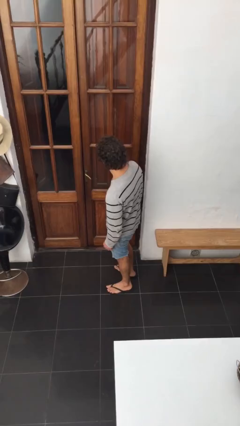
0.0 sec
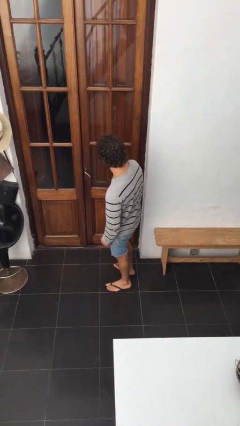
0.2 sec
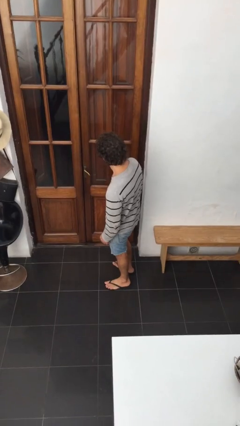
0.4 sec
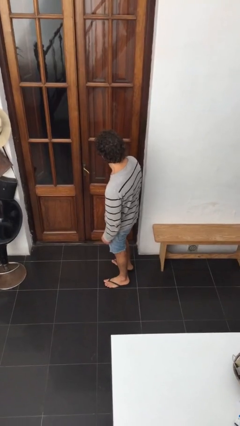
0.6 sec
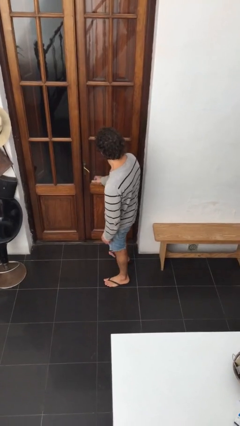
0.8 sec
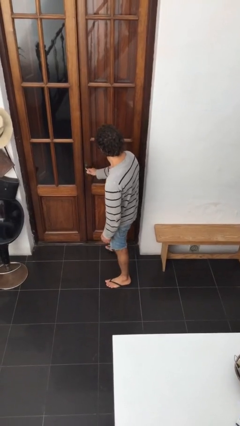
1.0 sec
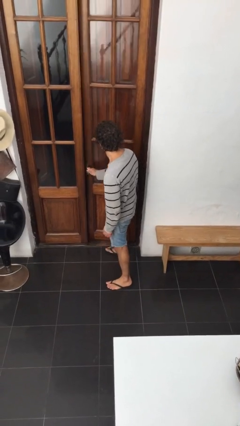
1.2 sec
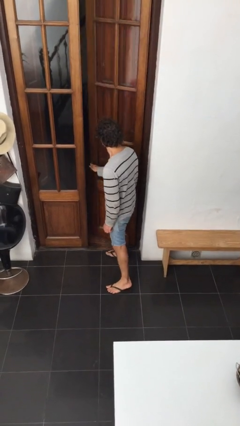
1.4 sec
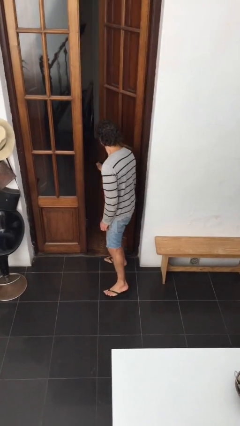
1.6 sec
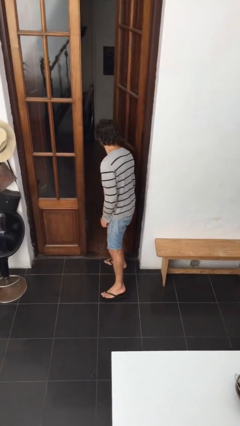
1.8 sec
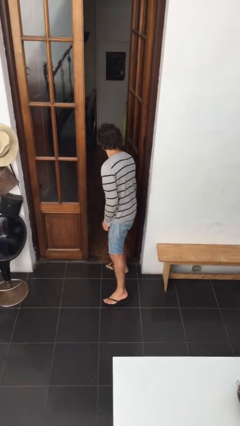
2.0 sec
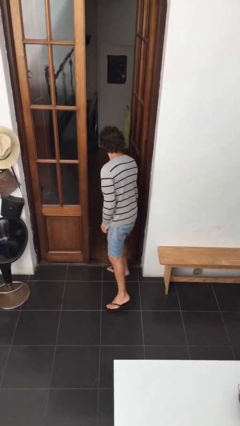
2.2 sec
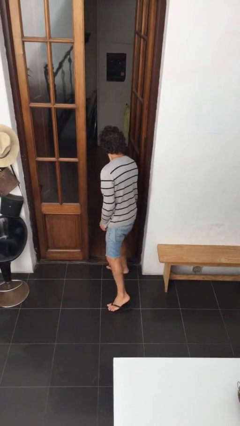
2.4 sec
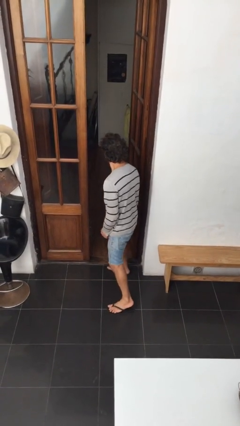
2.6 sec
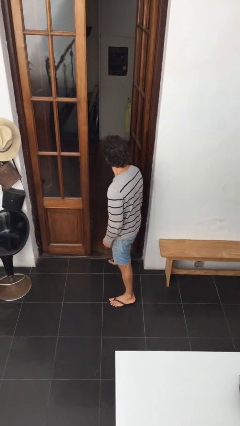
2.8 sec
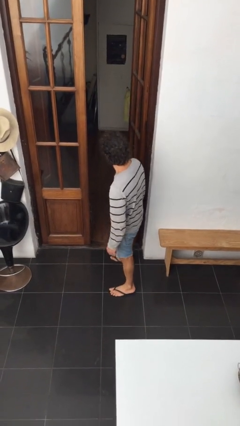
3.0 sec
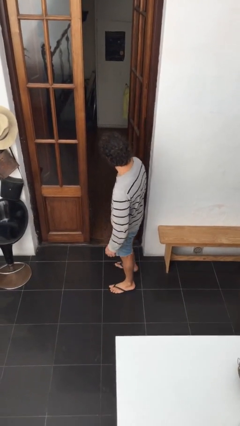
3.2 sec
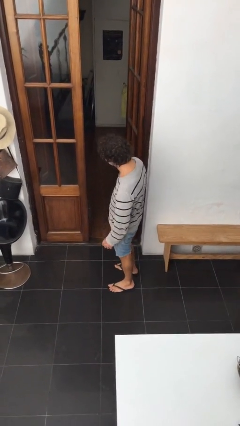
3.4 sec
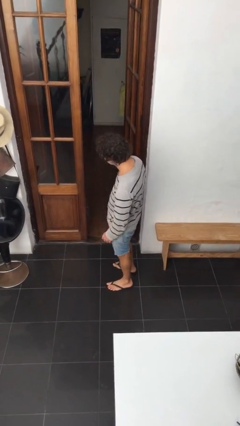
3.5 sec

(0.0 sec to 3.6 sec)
person opens facility door

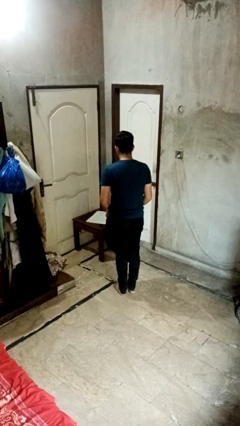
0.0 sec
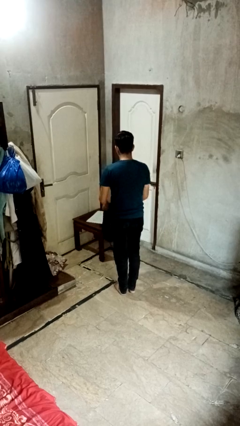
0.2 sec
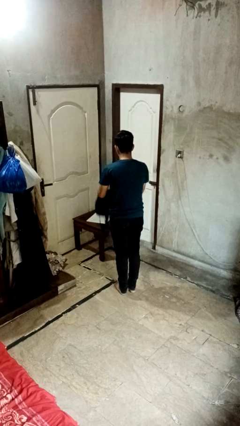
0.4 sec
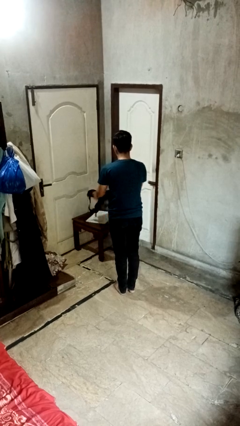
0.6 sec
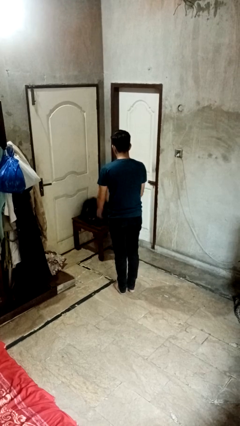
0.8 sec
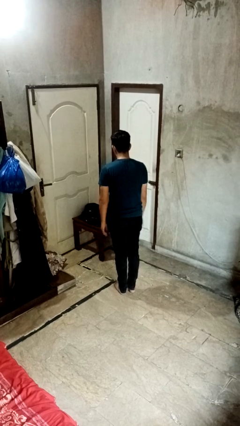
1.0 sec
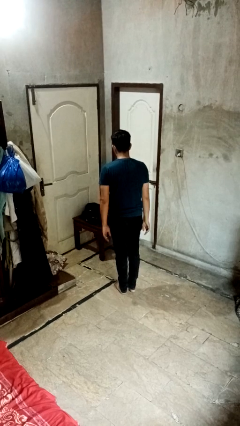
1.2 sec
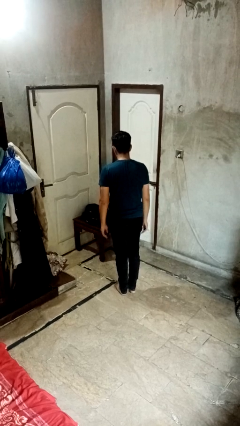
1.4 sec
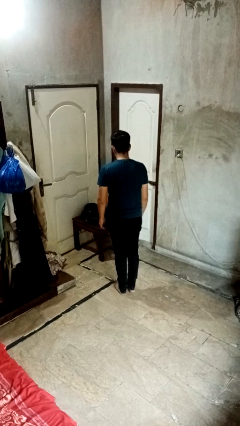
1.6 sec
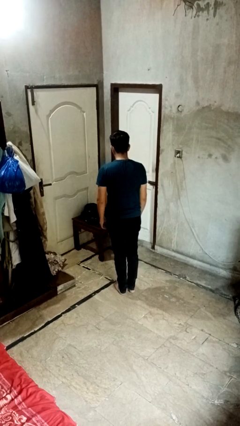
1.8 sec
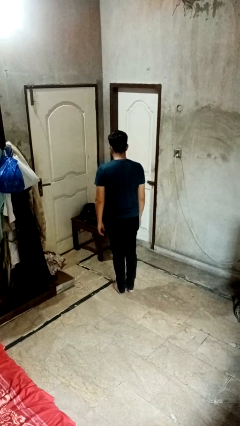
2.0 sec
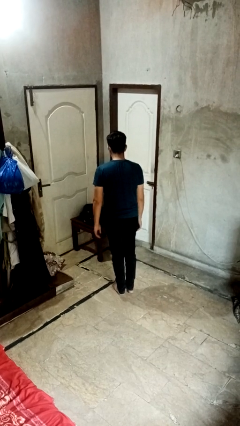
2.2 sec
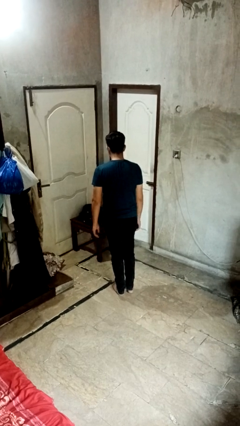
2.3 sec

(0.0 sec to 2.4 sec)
person throws object on table

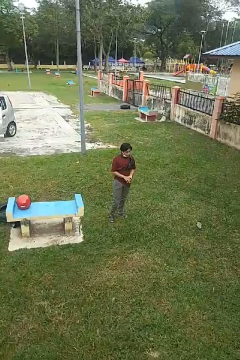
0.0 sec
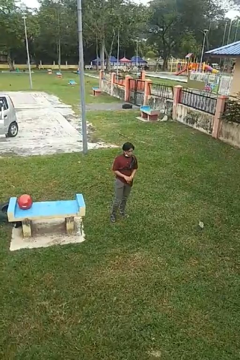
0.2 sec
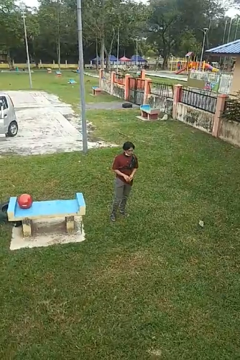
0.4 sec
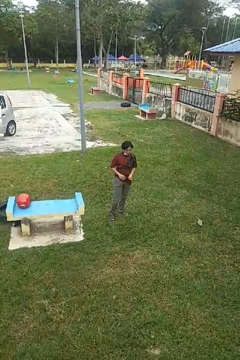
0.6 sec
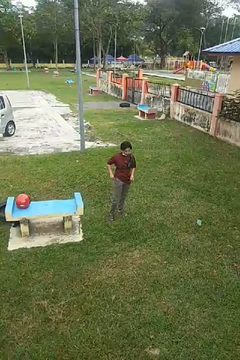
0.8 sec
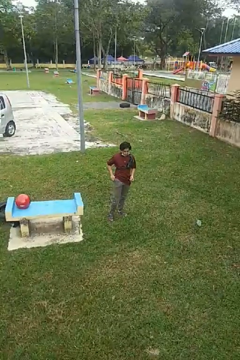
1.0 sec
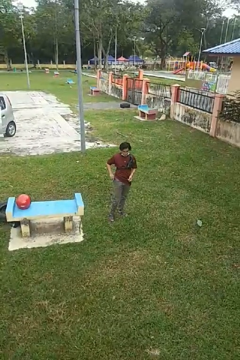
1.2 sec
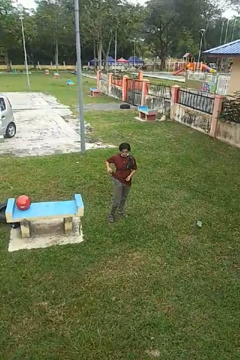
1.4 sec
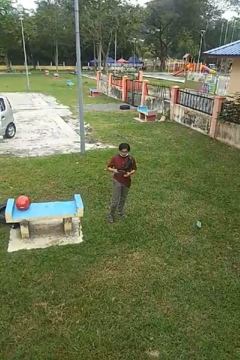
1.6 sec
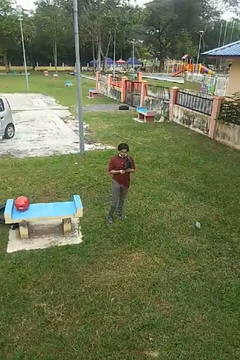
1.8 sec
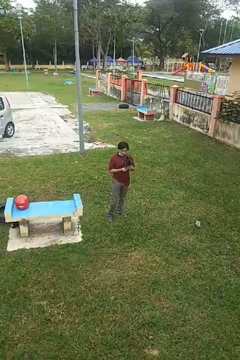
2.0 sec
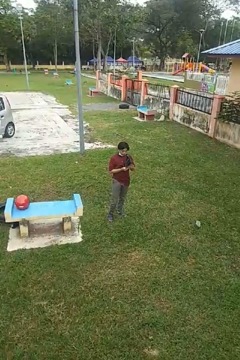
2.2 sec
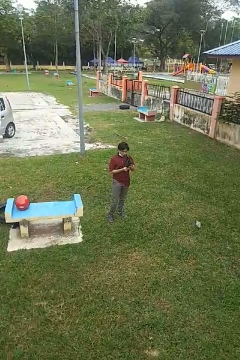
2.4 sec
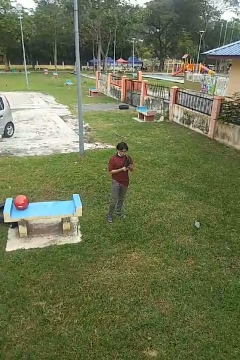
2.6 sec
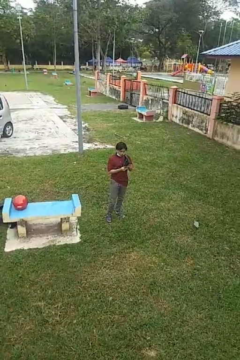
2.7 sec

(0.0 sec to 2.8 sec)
person takes phone from pocket

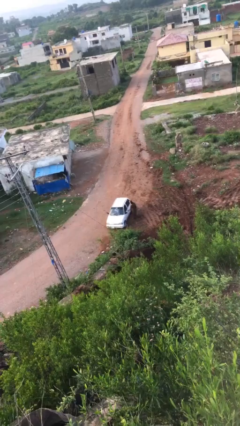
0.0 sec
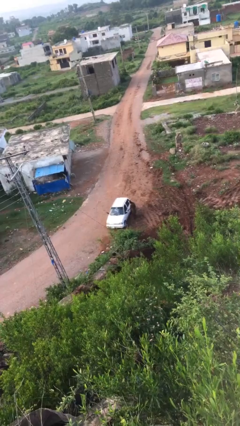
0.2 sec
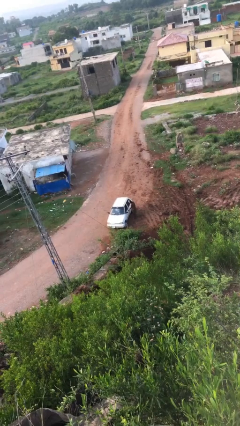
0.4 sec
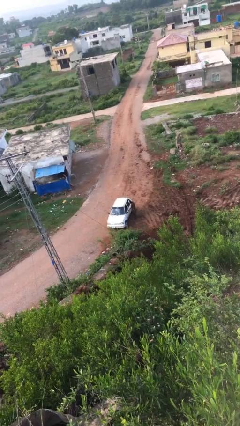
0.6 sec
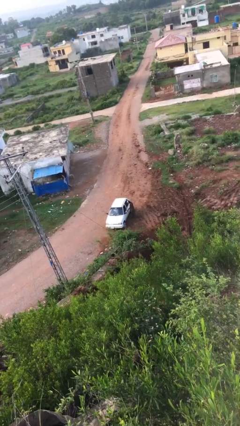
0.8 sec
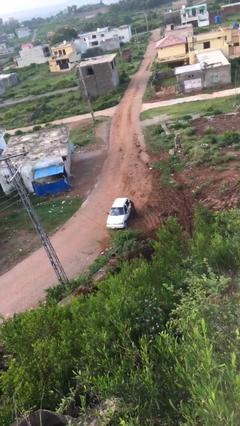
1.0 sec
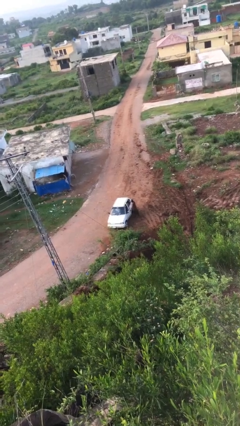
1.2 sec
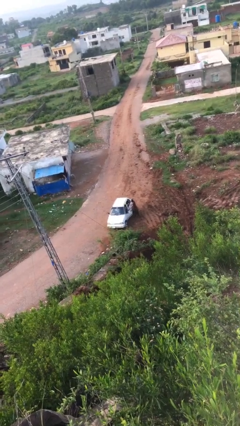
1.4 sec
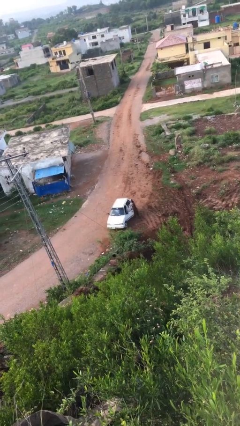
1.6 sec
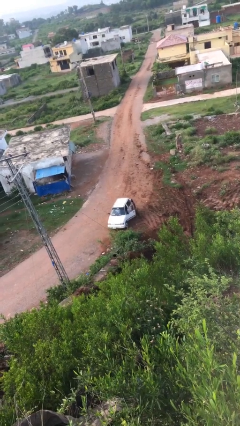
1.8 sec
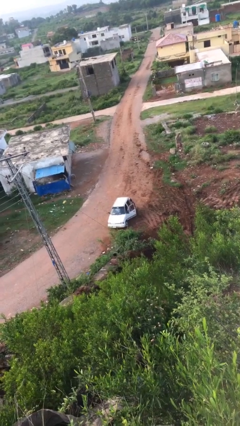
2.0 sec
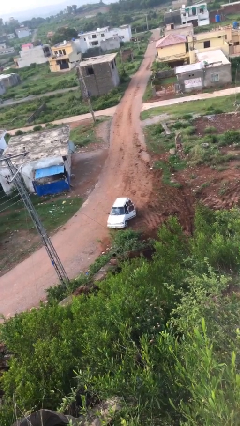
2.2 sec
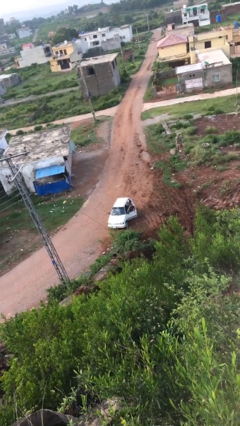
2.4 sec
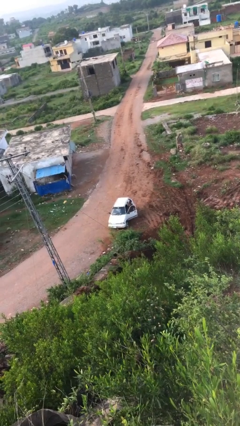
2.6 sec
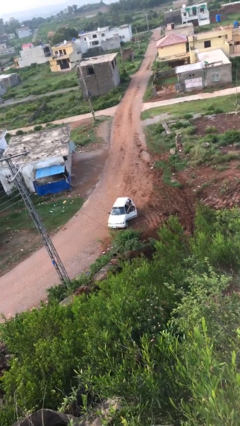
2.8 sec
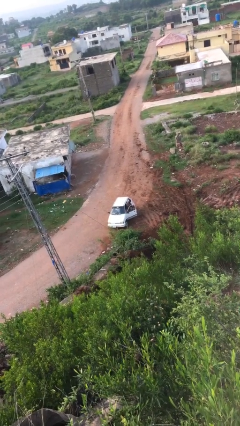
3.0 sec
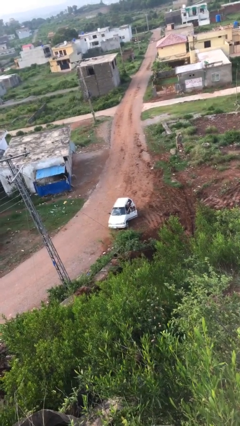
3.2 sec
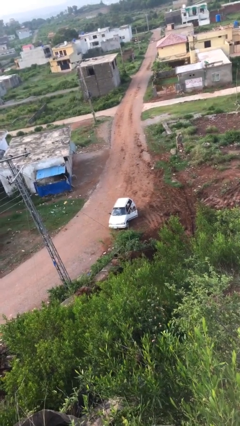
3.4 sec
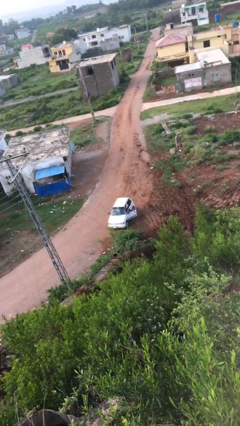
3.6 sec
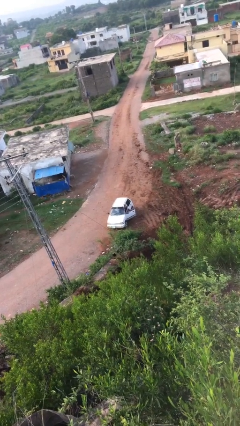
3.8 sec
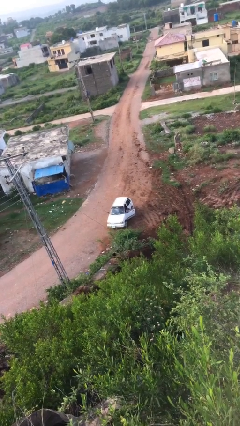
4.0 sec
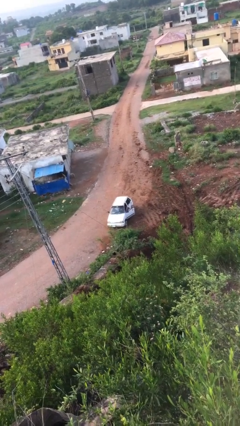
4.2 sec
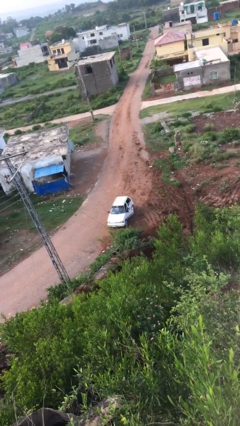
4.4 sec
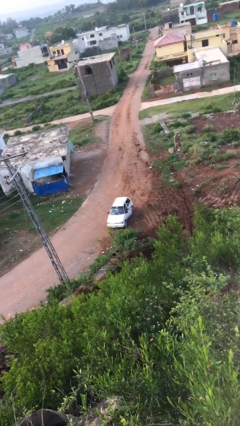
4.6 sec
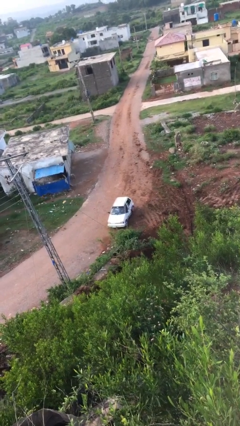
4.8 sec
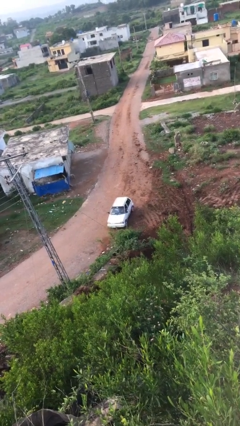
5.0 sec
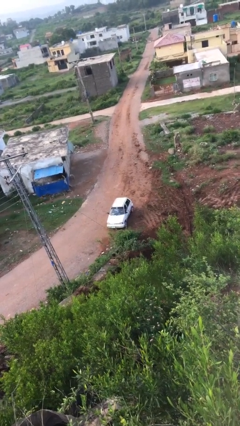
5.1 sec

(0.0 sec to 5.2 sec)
car picks up person

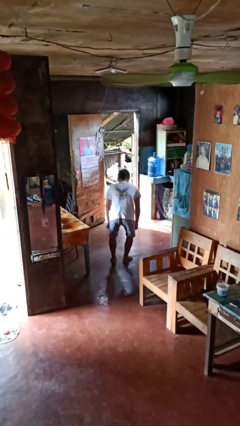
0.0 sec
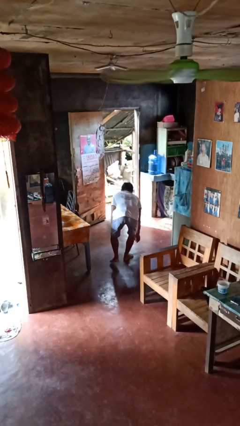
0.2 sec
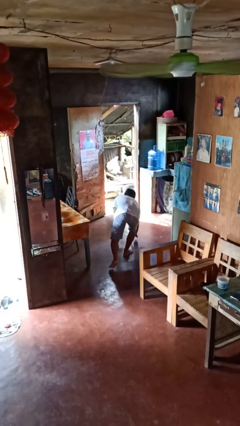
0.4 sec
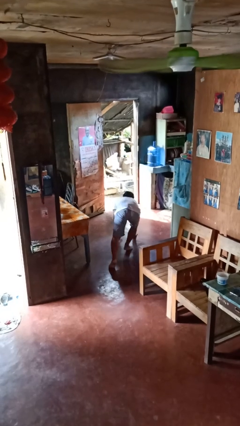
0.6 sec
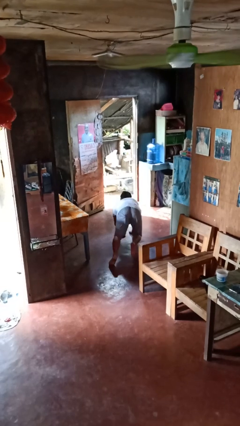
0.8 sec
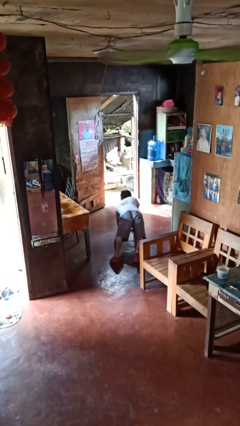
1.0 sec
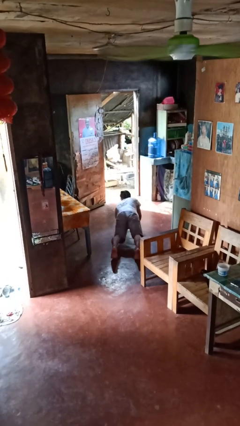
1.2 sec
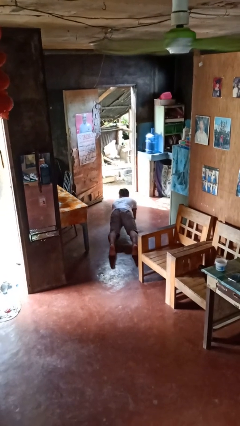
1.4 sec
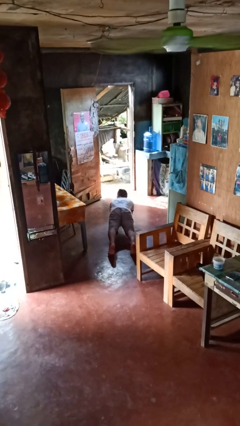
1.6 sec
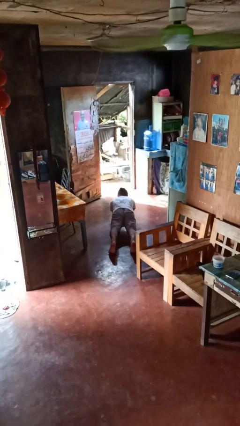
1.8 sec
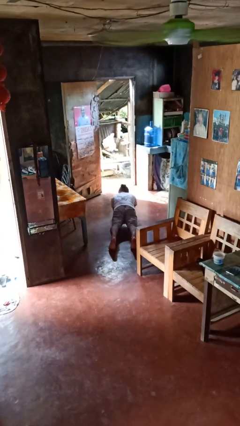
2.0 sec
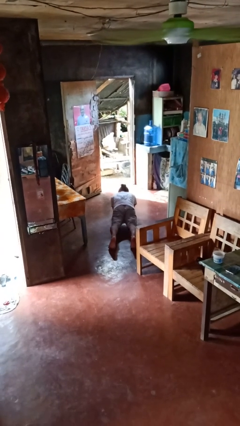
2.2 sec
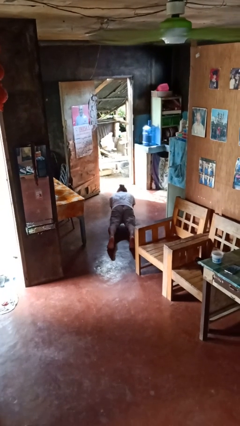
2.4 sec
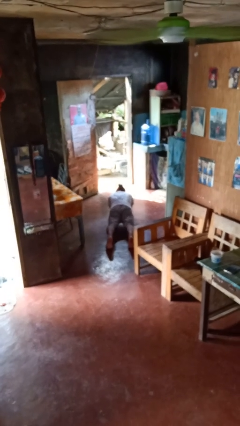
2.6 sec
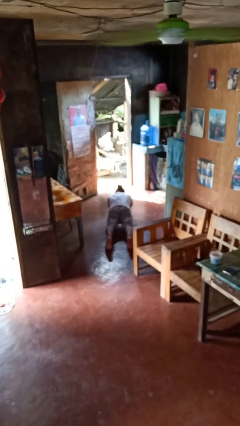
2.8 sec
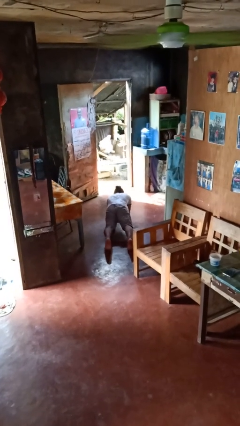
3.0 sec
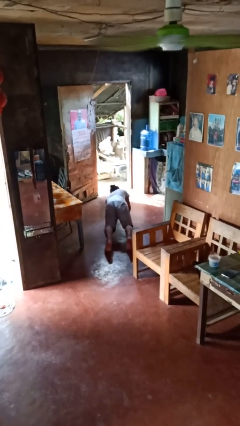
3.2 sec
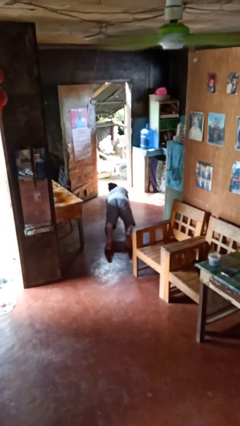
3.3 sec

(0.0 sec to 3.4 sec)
person exercises with plank

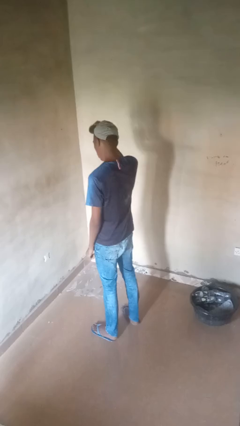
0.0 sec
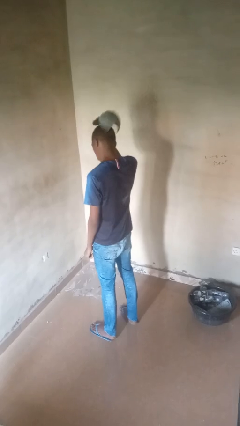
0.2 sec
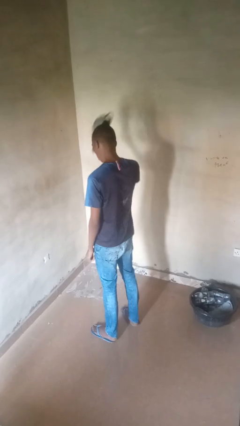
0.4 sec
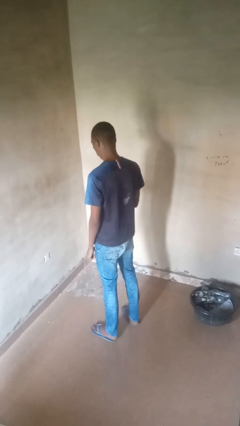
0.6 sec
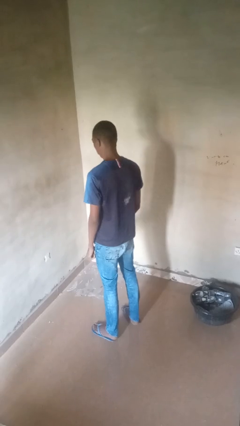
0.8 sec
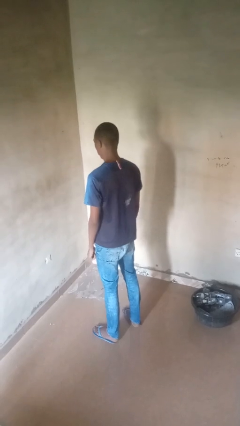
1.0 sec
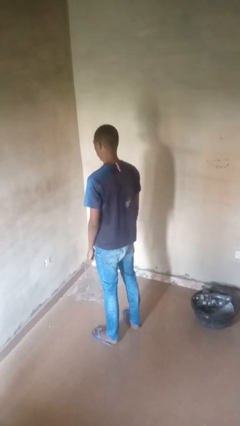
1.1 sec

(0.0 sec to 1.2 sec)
person takes off hat
